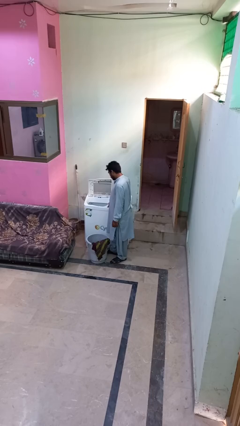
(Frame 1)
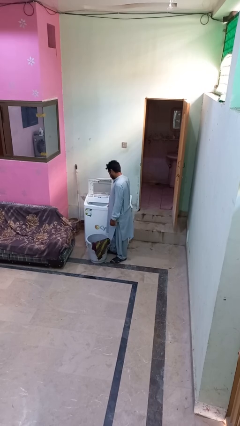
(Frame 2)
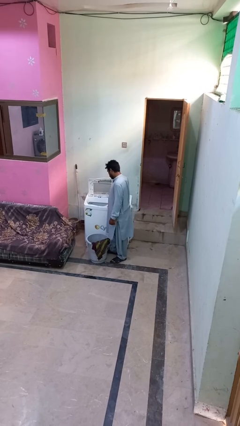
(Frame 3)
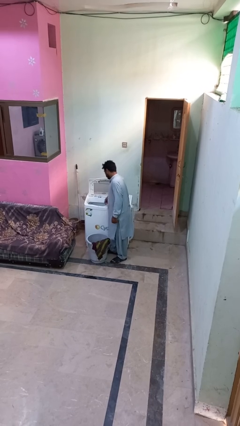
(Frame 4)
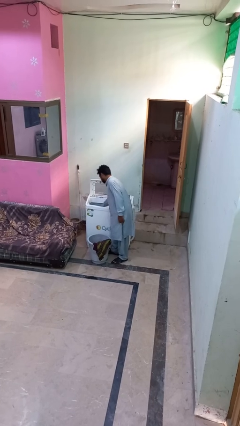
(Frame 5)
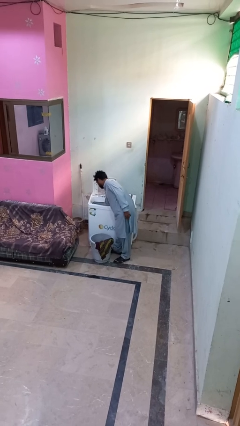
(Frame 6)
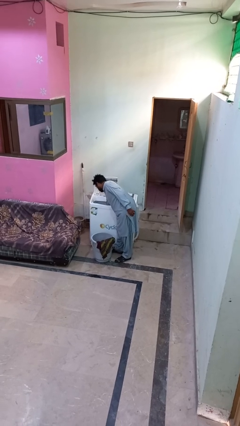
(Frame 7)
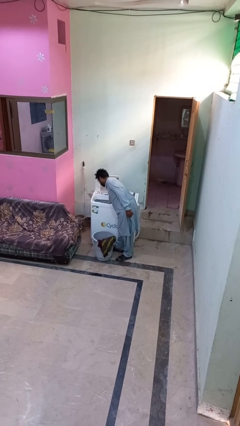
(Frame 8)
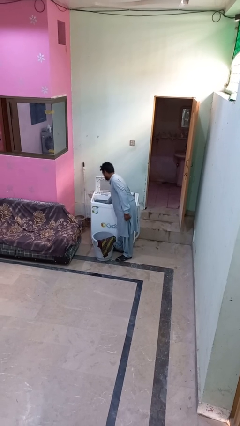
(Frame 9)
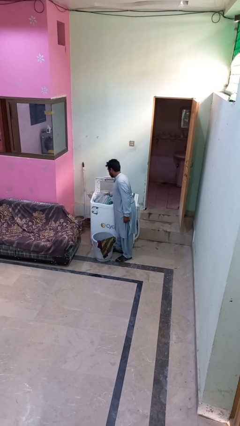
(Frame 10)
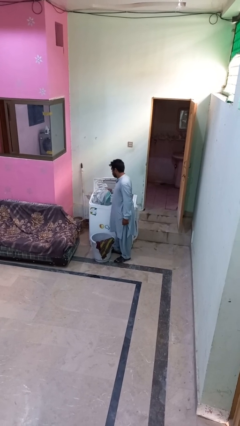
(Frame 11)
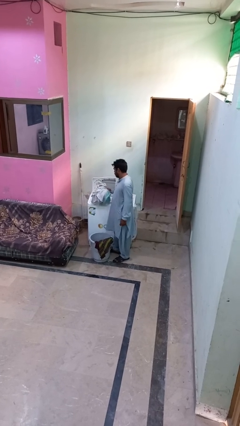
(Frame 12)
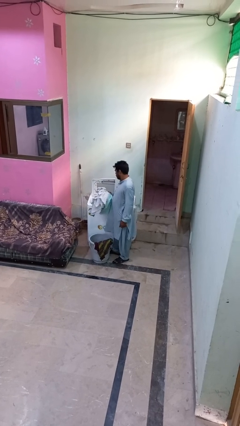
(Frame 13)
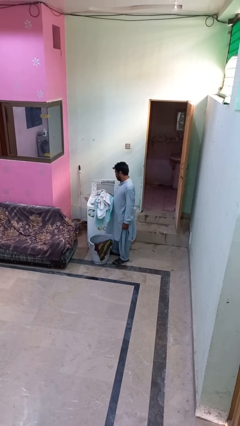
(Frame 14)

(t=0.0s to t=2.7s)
person unloads clotheswasher

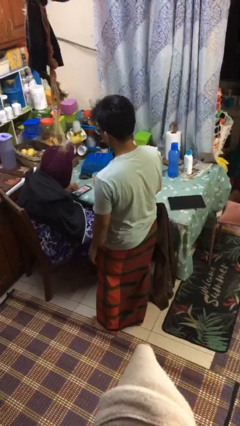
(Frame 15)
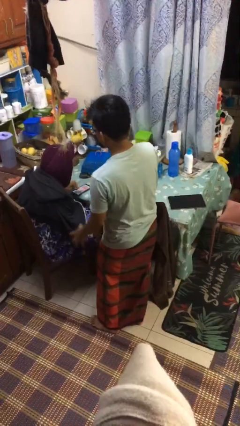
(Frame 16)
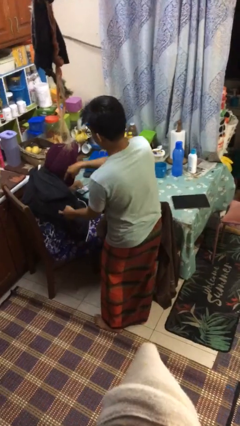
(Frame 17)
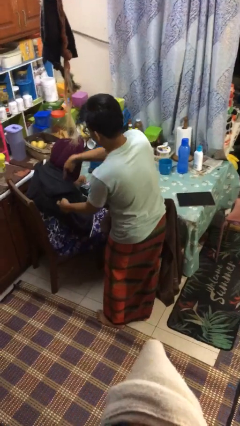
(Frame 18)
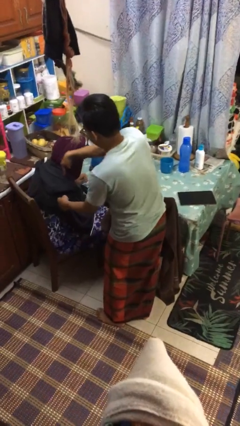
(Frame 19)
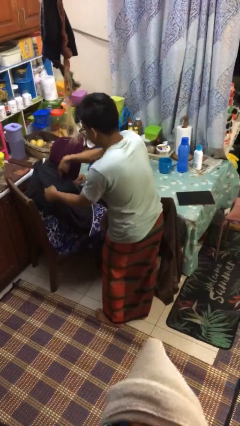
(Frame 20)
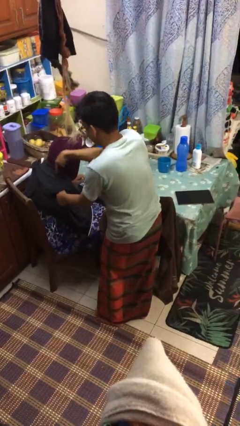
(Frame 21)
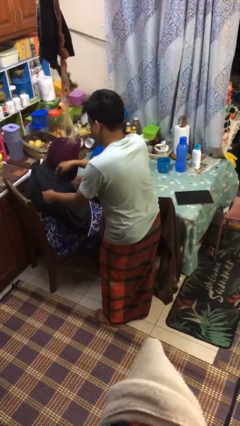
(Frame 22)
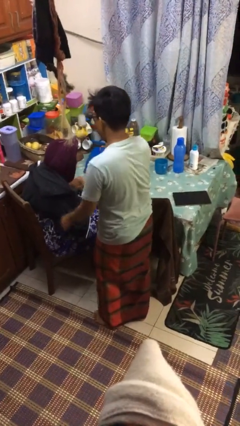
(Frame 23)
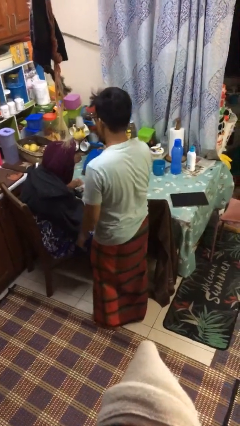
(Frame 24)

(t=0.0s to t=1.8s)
person tickles person

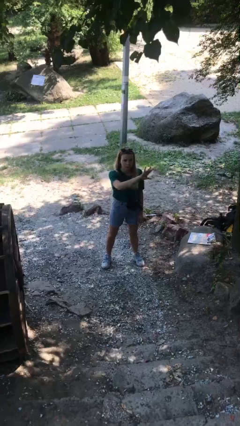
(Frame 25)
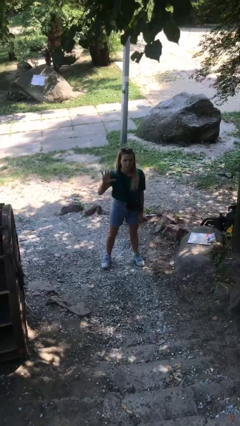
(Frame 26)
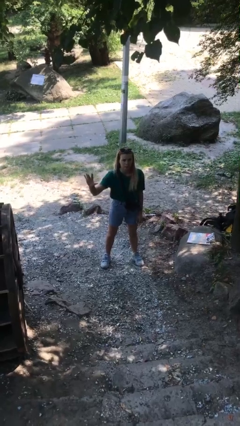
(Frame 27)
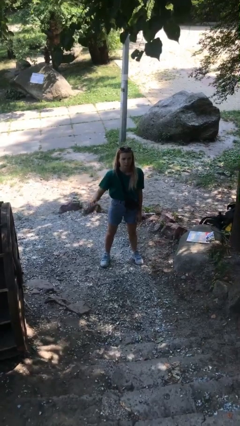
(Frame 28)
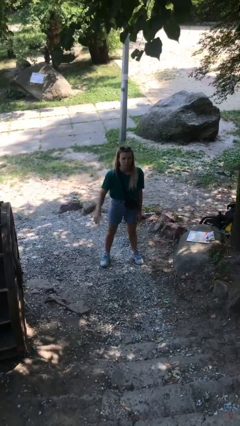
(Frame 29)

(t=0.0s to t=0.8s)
person gestures swipe right

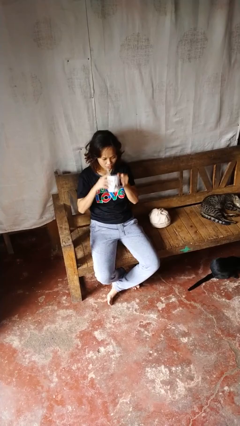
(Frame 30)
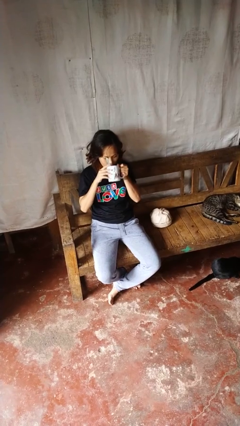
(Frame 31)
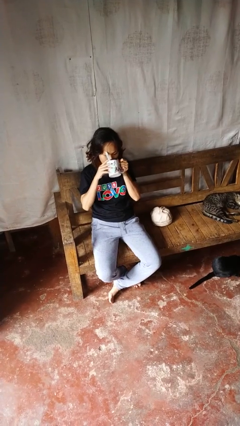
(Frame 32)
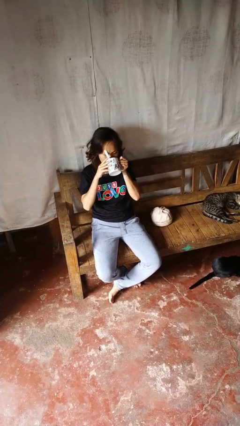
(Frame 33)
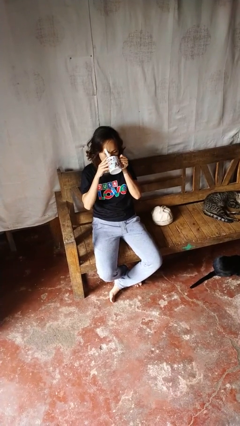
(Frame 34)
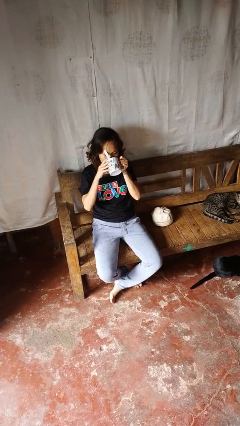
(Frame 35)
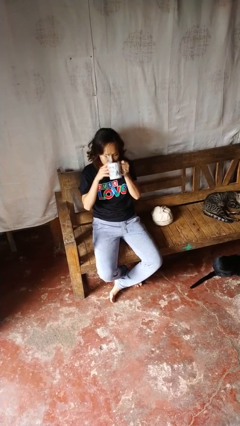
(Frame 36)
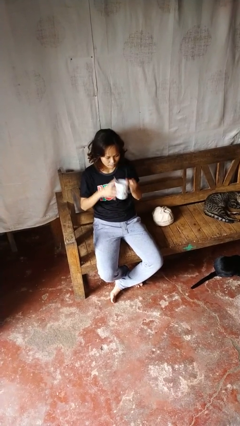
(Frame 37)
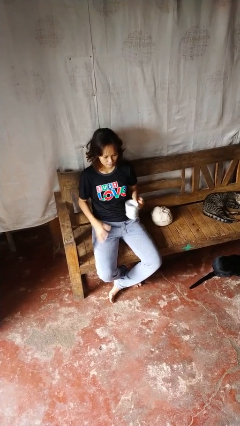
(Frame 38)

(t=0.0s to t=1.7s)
person drinks from mug

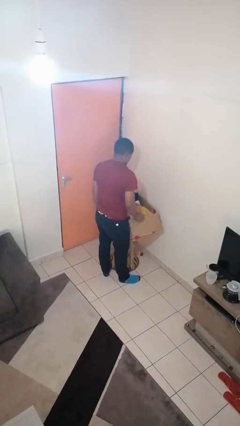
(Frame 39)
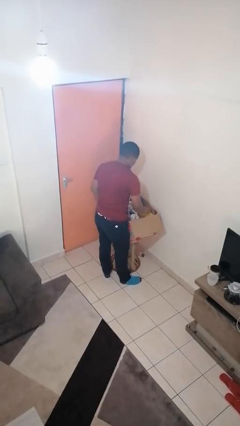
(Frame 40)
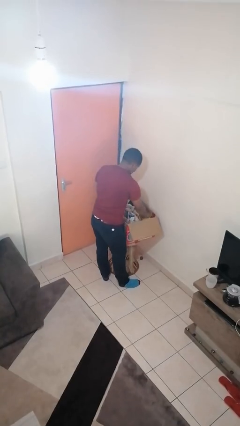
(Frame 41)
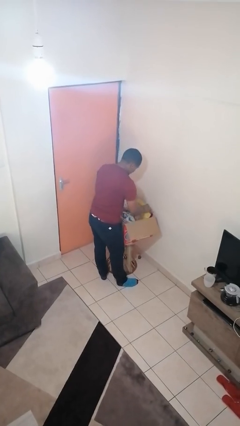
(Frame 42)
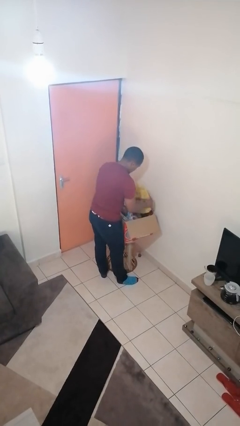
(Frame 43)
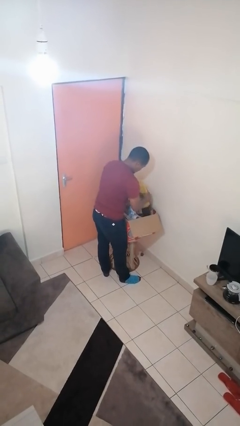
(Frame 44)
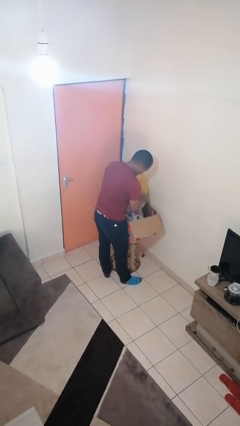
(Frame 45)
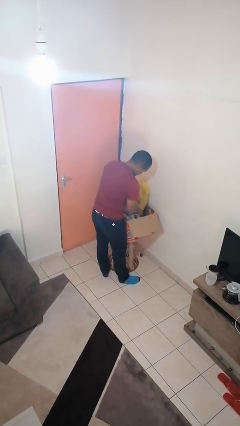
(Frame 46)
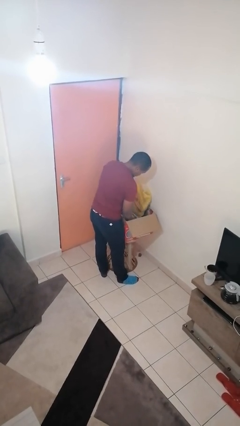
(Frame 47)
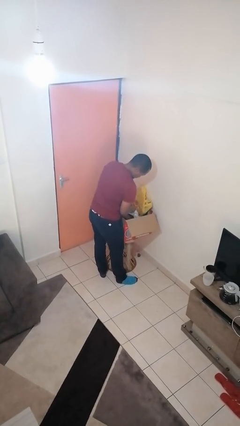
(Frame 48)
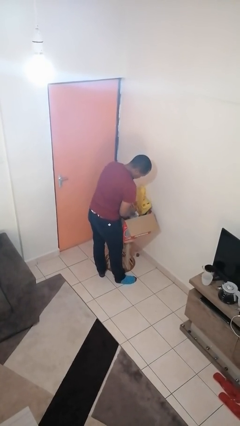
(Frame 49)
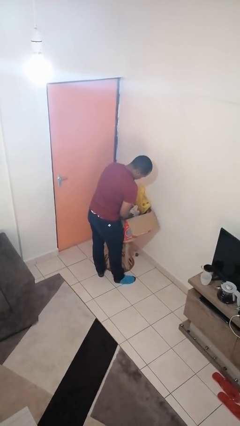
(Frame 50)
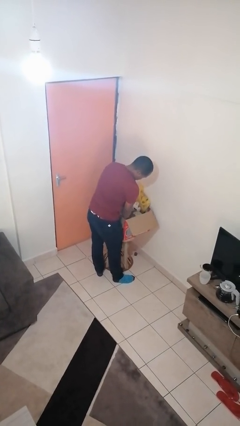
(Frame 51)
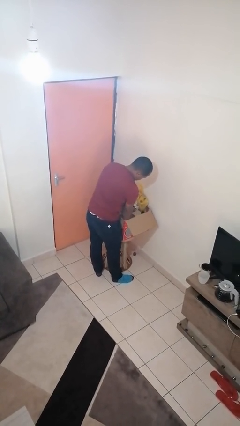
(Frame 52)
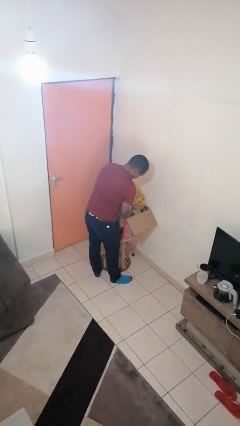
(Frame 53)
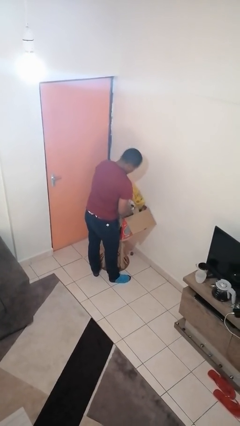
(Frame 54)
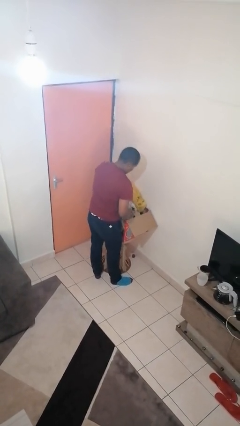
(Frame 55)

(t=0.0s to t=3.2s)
person searches in box

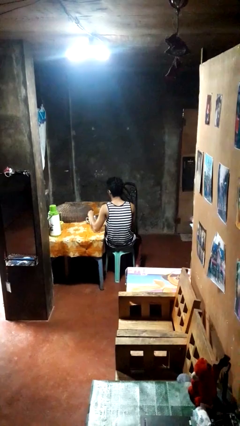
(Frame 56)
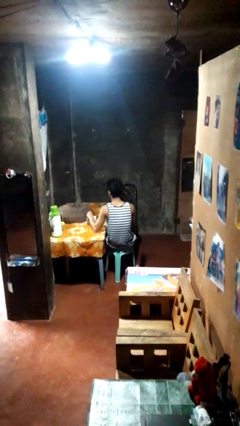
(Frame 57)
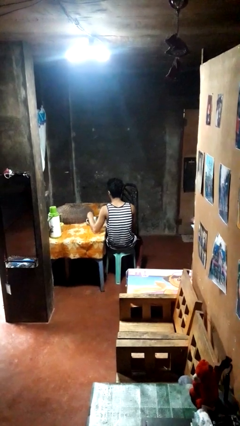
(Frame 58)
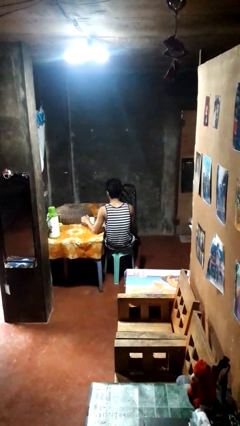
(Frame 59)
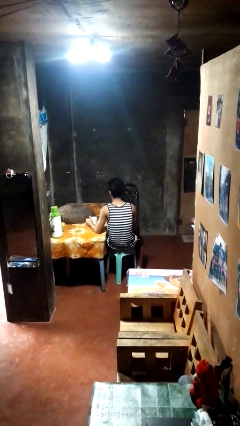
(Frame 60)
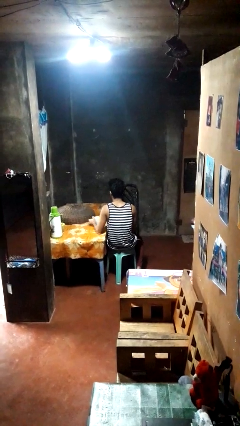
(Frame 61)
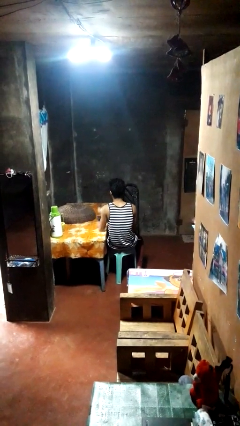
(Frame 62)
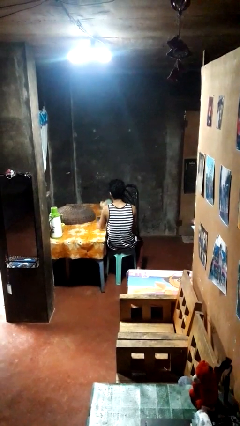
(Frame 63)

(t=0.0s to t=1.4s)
person stirs mug

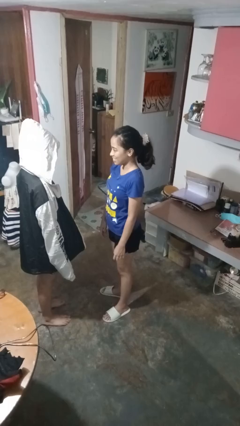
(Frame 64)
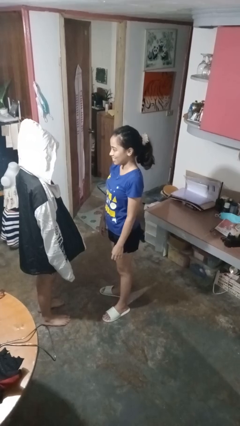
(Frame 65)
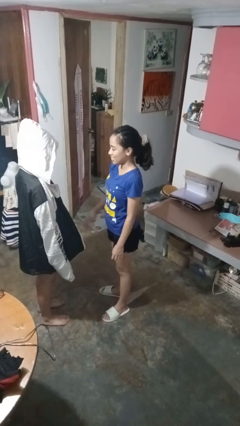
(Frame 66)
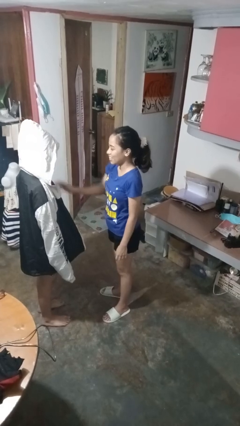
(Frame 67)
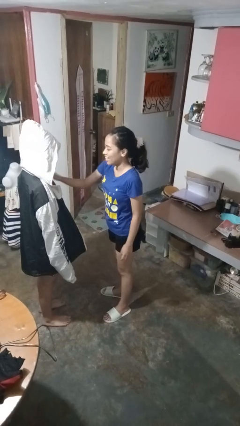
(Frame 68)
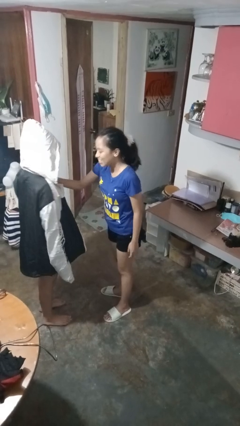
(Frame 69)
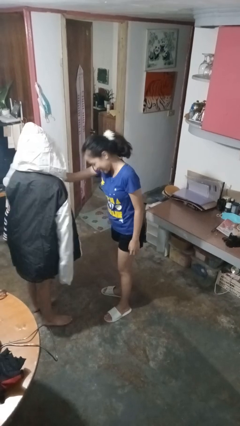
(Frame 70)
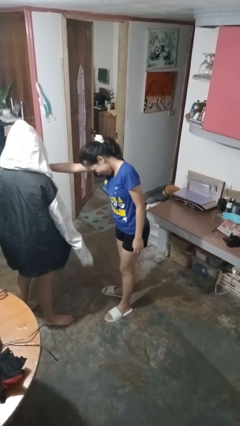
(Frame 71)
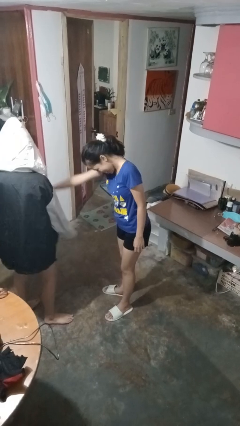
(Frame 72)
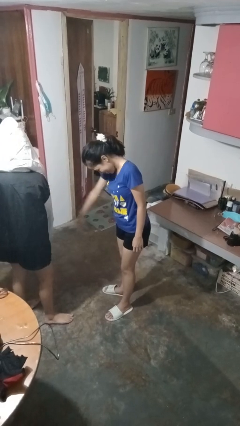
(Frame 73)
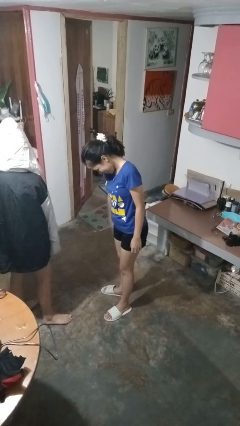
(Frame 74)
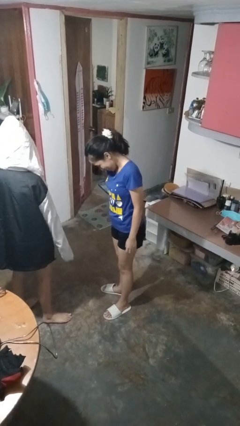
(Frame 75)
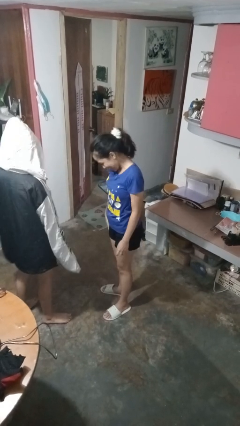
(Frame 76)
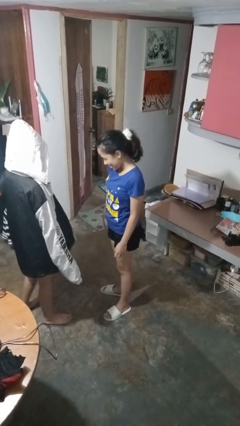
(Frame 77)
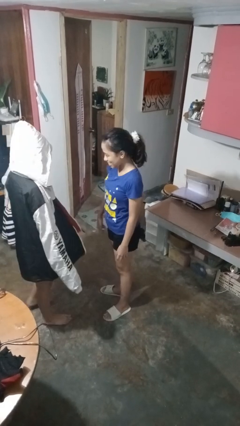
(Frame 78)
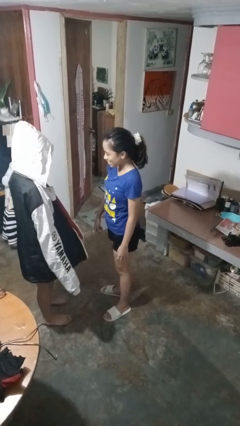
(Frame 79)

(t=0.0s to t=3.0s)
person shoves person

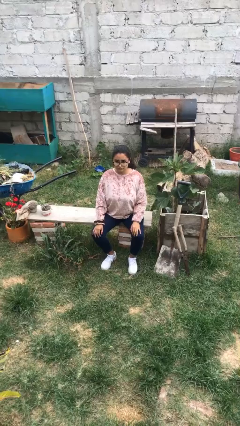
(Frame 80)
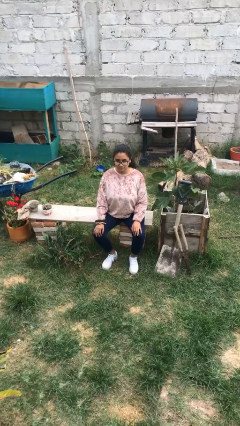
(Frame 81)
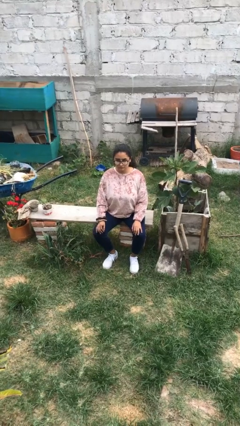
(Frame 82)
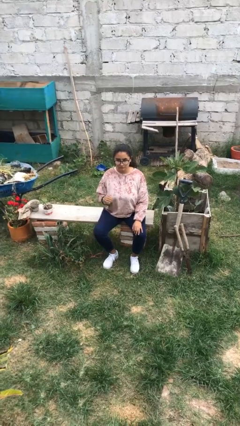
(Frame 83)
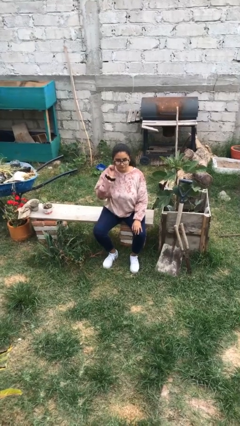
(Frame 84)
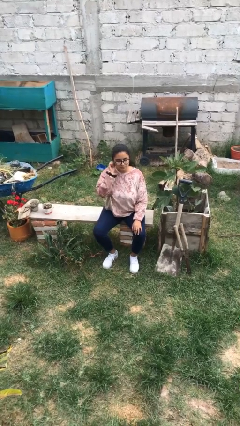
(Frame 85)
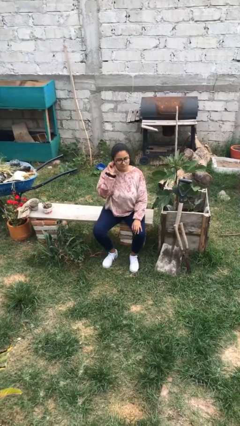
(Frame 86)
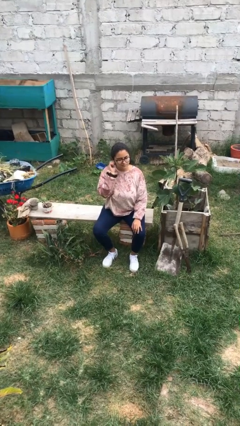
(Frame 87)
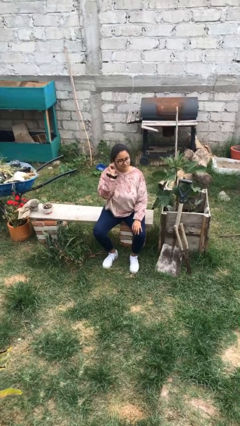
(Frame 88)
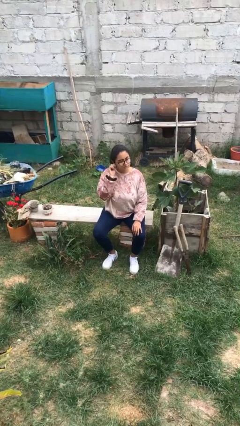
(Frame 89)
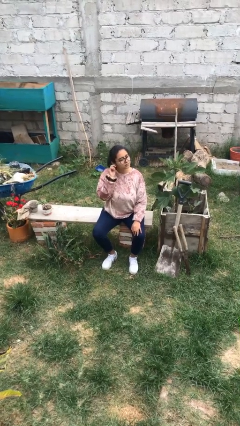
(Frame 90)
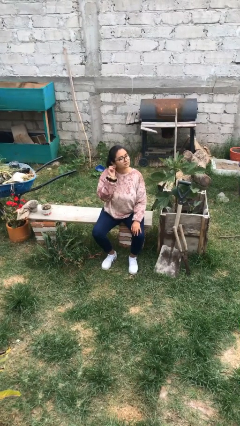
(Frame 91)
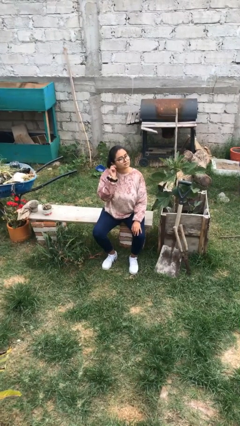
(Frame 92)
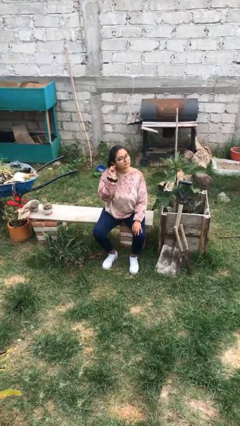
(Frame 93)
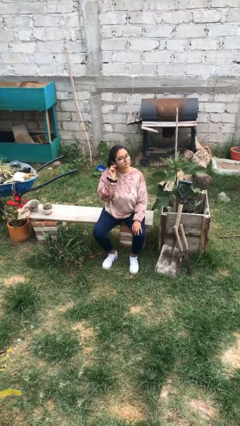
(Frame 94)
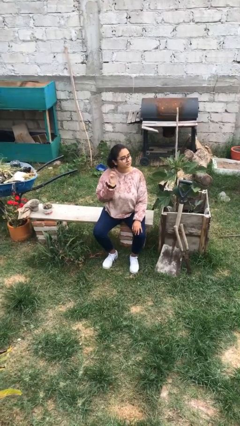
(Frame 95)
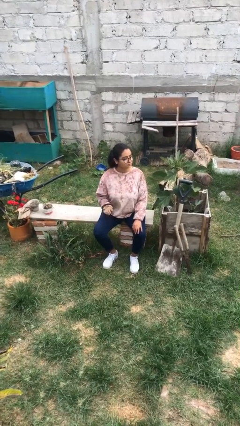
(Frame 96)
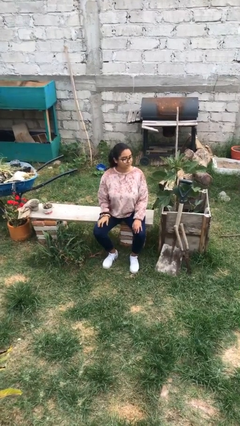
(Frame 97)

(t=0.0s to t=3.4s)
person touches earlobe
